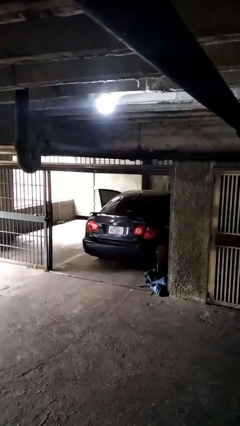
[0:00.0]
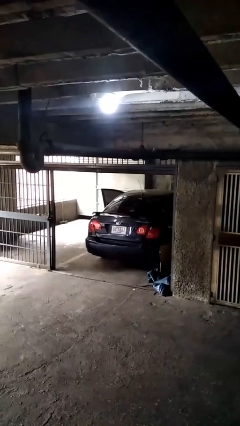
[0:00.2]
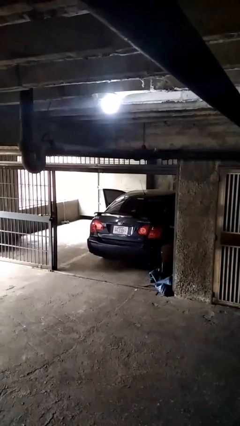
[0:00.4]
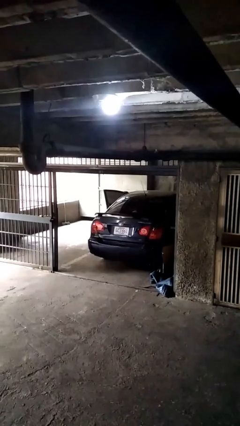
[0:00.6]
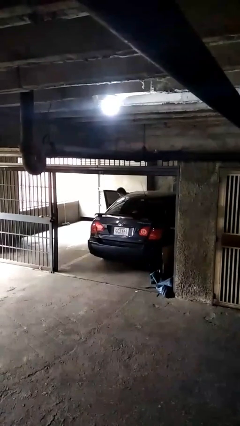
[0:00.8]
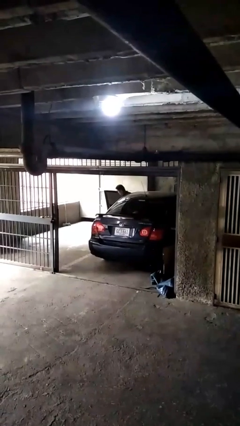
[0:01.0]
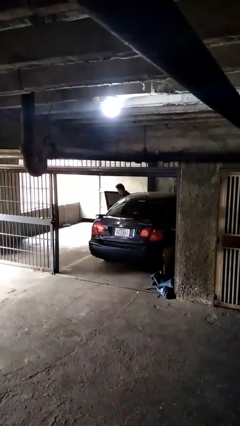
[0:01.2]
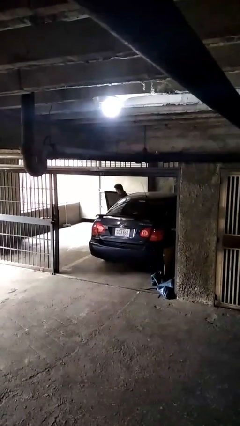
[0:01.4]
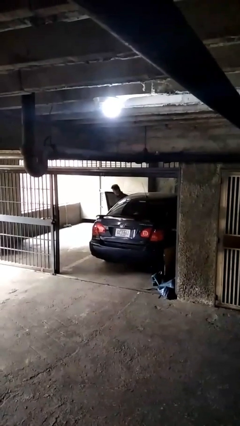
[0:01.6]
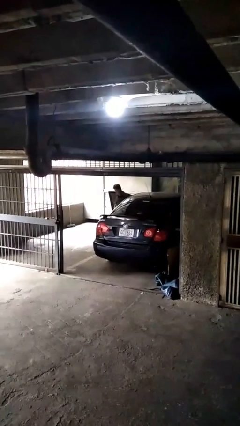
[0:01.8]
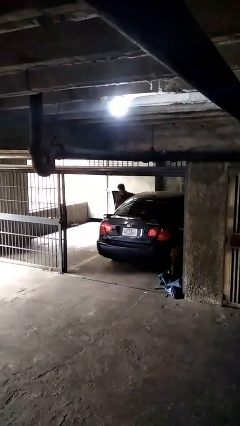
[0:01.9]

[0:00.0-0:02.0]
person exits car

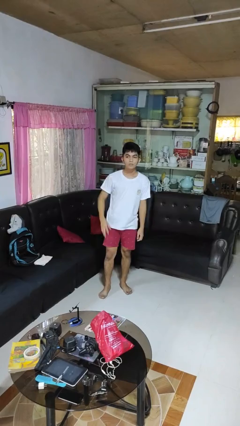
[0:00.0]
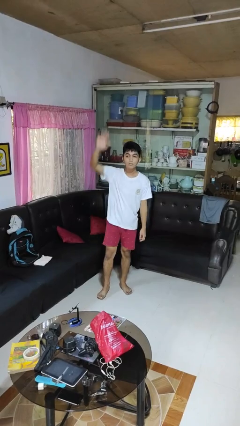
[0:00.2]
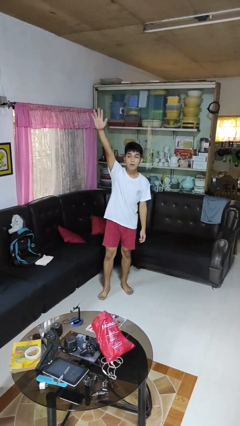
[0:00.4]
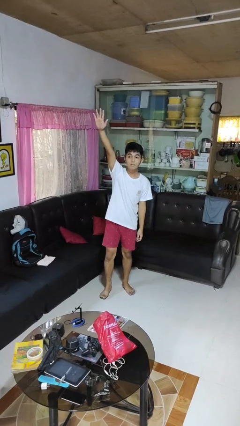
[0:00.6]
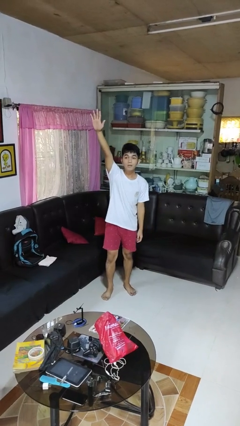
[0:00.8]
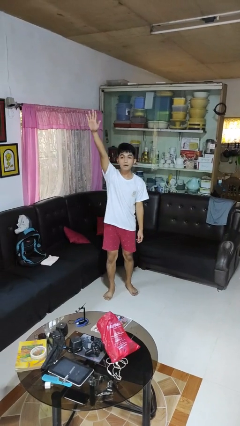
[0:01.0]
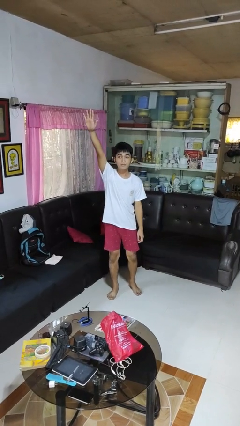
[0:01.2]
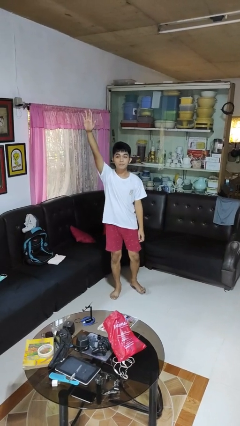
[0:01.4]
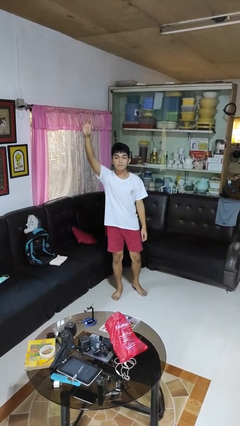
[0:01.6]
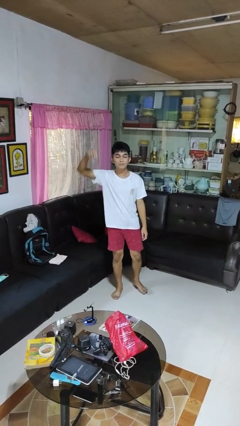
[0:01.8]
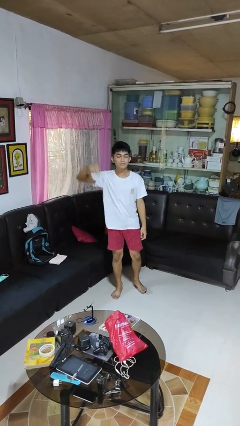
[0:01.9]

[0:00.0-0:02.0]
person gestures raise hand

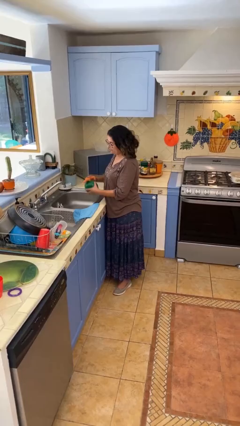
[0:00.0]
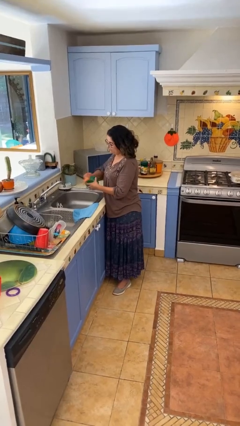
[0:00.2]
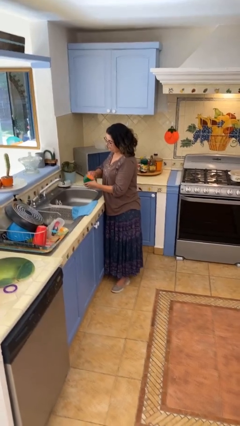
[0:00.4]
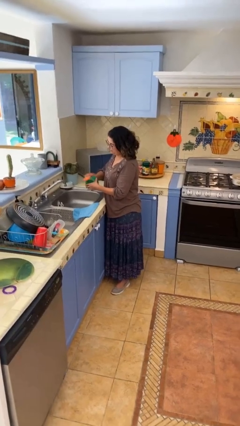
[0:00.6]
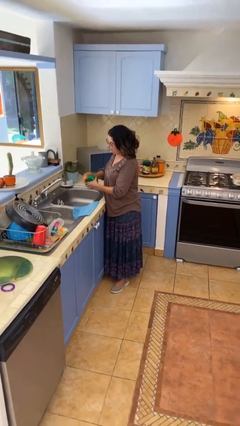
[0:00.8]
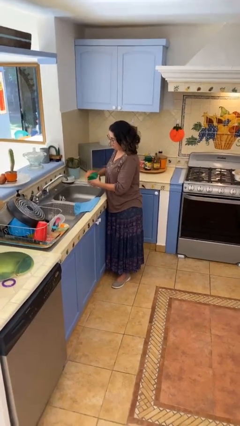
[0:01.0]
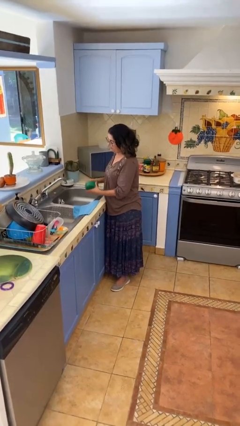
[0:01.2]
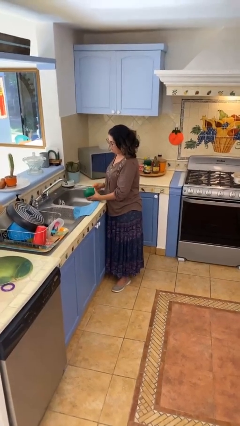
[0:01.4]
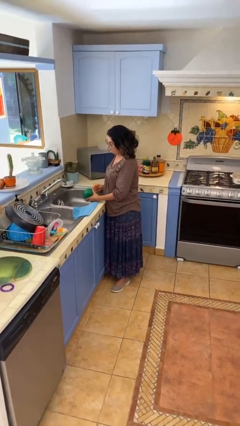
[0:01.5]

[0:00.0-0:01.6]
person washes dish

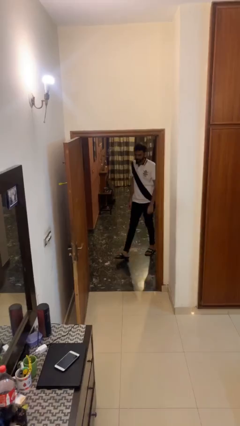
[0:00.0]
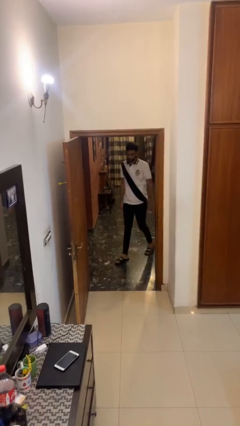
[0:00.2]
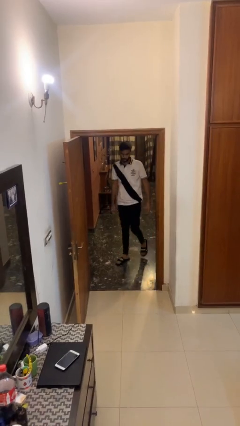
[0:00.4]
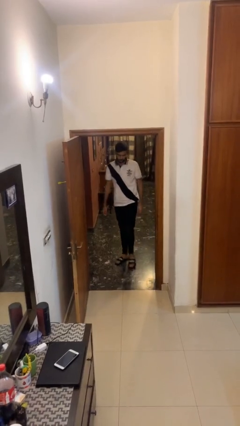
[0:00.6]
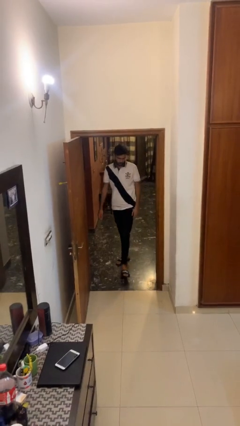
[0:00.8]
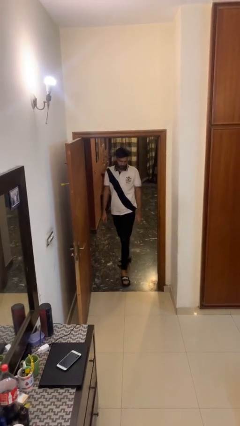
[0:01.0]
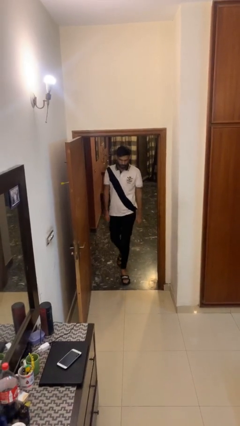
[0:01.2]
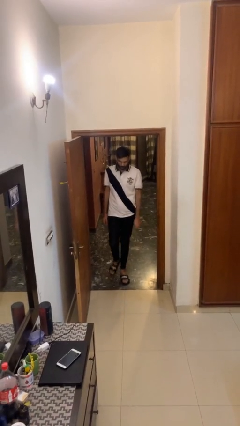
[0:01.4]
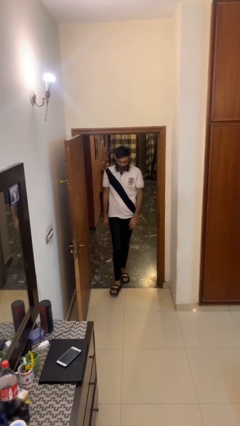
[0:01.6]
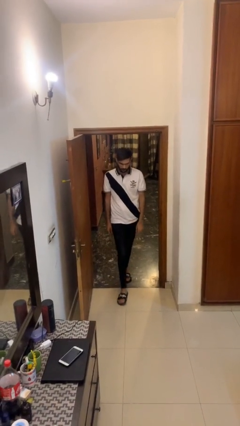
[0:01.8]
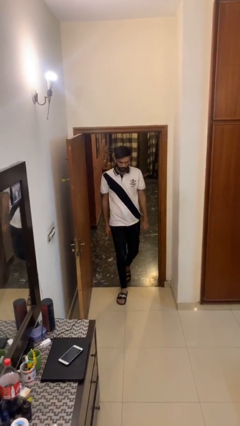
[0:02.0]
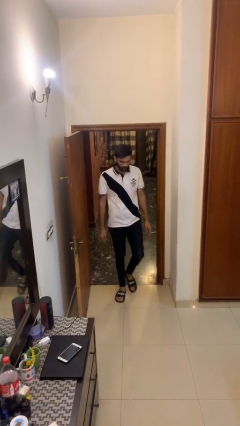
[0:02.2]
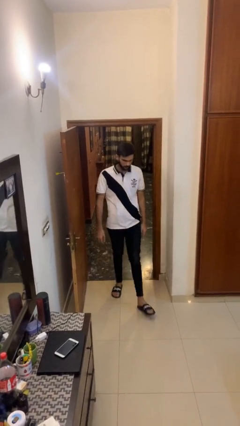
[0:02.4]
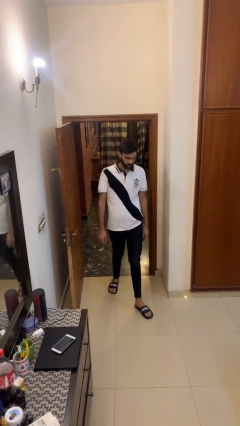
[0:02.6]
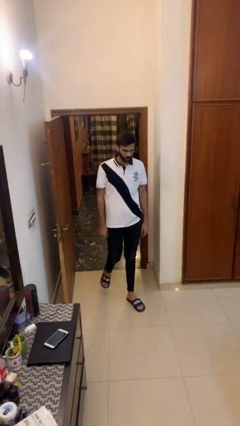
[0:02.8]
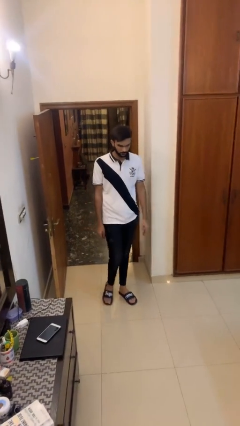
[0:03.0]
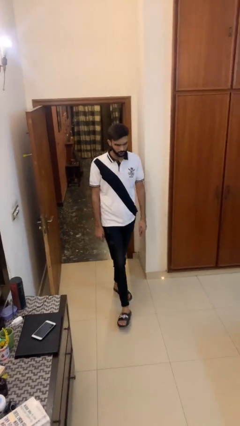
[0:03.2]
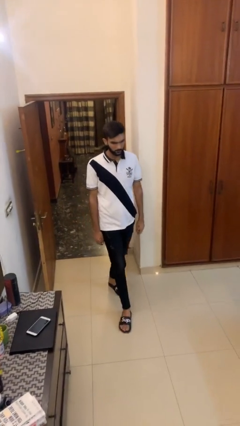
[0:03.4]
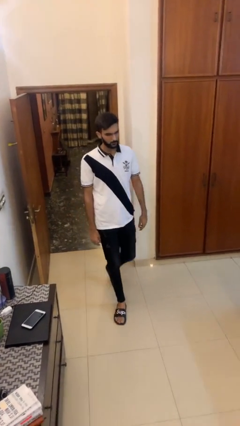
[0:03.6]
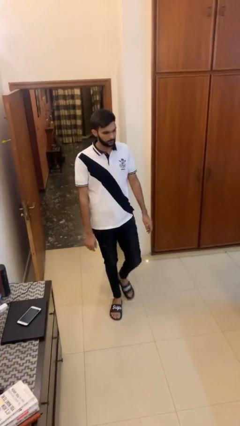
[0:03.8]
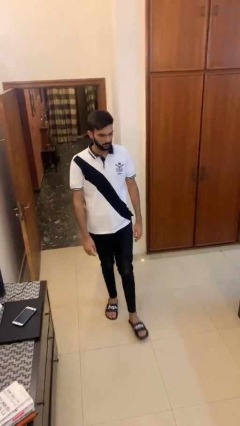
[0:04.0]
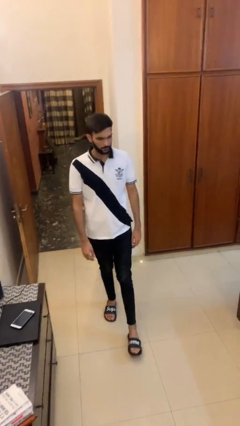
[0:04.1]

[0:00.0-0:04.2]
person enters scene through structure

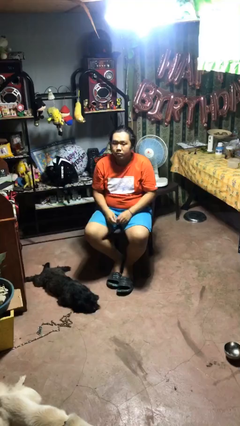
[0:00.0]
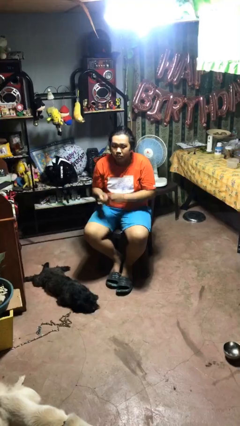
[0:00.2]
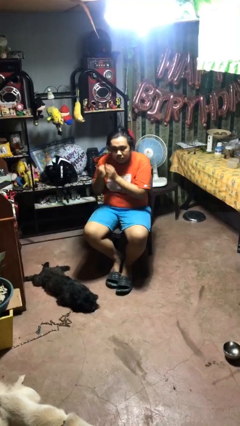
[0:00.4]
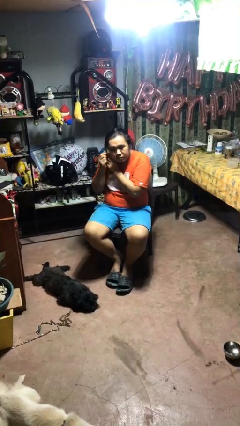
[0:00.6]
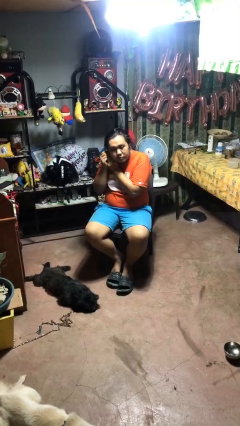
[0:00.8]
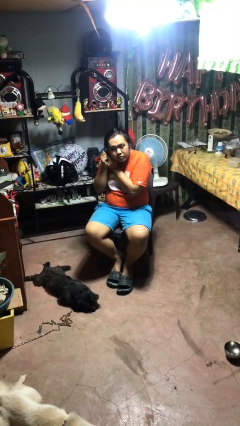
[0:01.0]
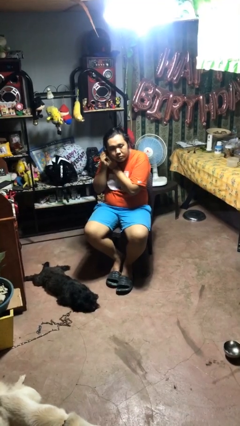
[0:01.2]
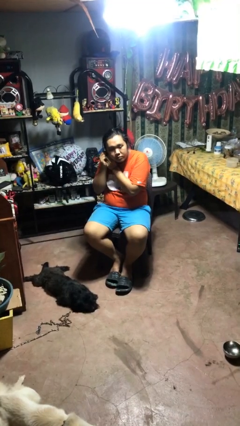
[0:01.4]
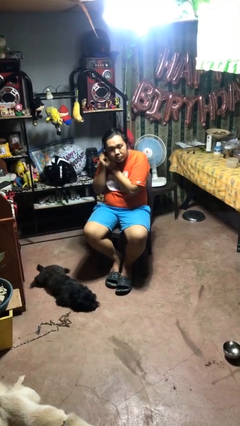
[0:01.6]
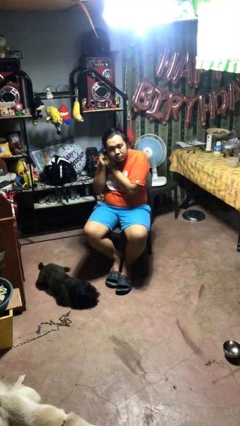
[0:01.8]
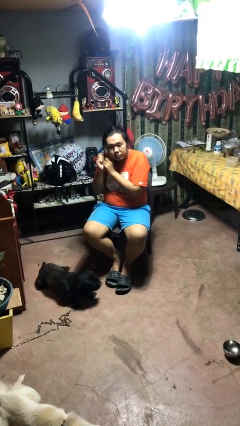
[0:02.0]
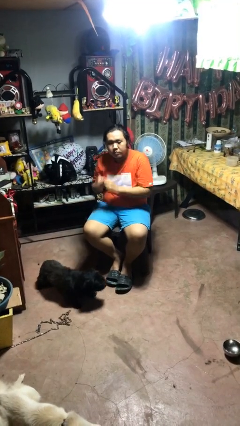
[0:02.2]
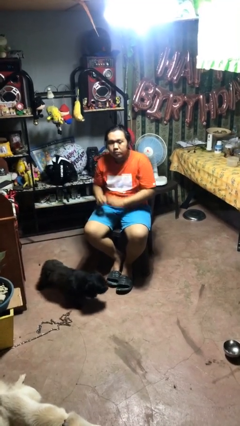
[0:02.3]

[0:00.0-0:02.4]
person puts on earrings

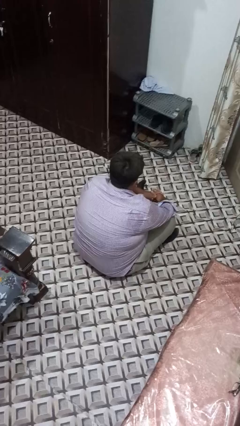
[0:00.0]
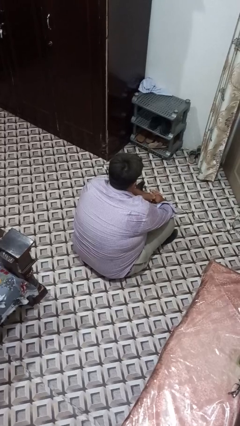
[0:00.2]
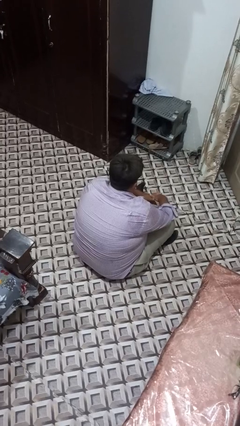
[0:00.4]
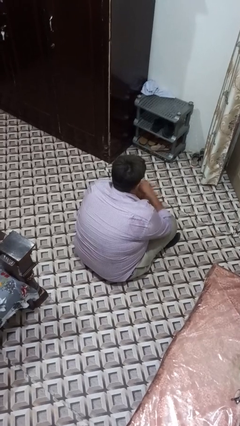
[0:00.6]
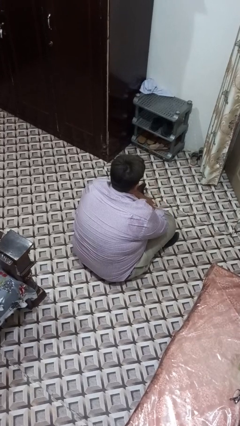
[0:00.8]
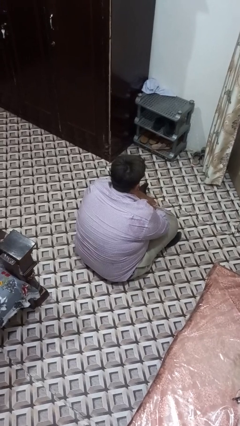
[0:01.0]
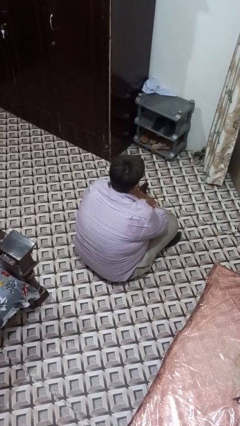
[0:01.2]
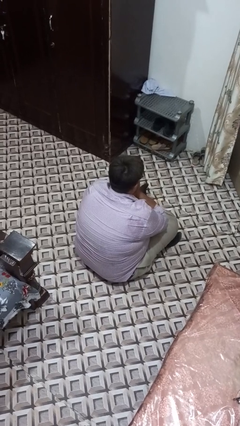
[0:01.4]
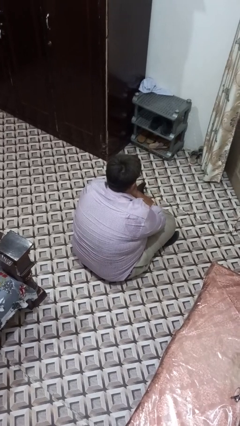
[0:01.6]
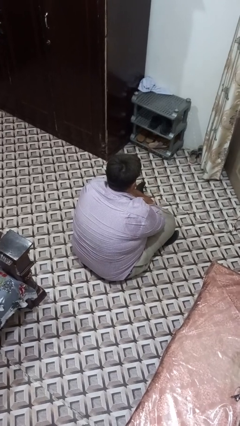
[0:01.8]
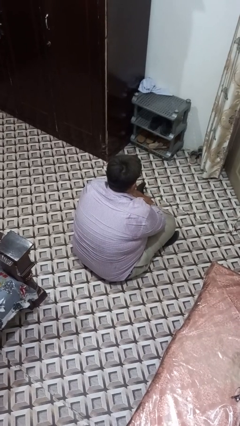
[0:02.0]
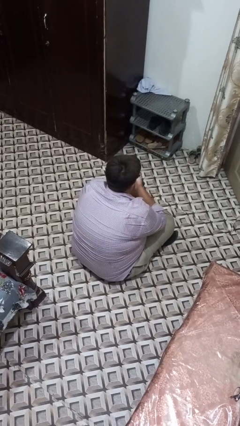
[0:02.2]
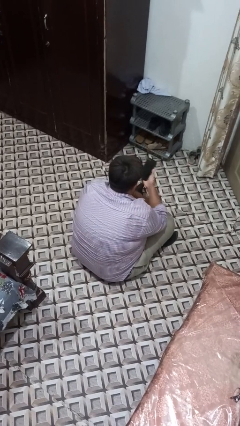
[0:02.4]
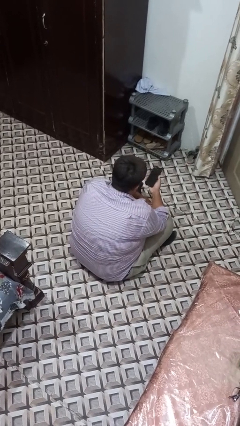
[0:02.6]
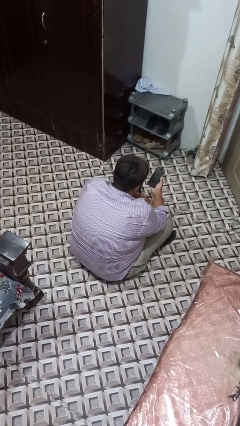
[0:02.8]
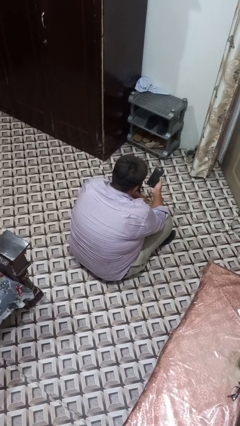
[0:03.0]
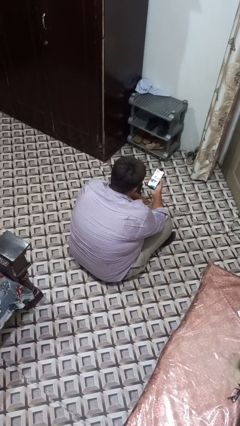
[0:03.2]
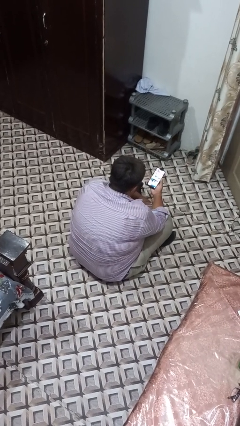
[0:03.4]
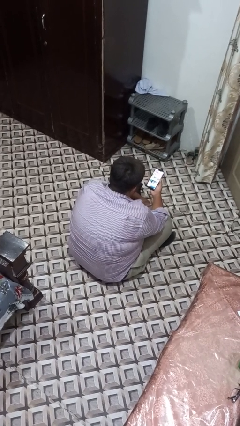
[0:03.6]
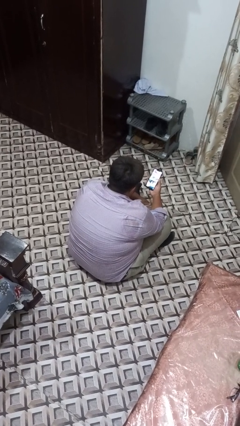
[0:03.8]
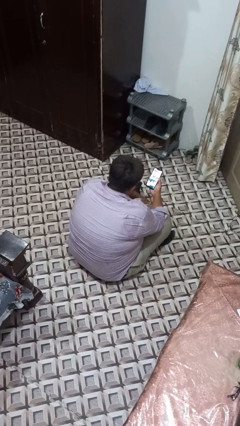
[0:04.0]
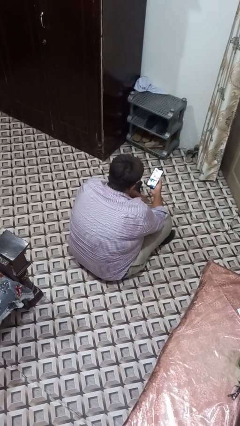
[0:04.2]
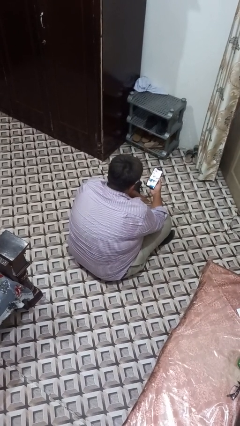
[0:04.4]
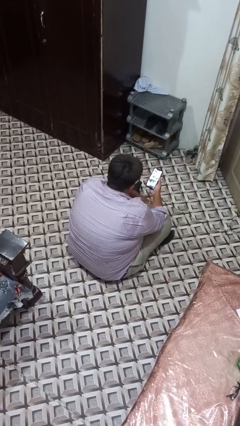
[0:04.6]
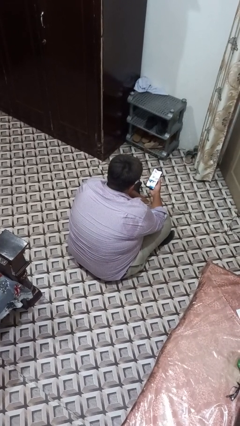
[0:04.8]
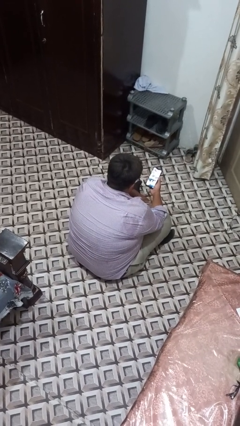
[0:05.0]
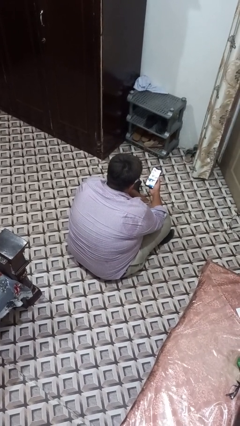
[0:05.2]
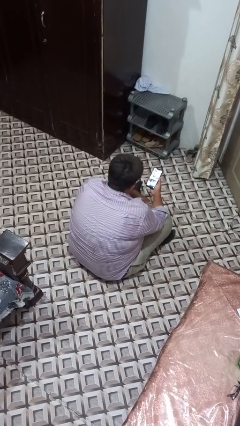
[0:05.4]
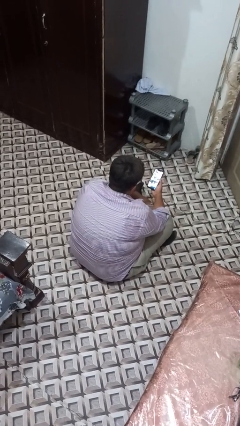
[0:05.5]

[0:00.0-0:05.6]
person takes phone from pocket
